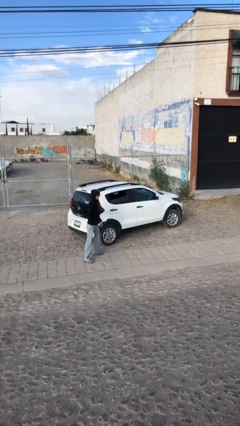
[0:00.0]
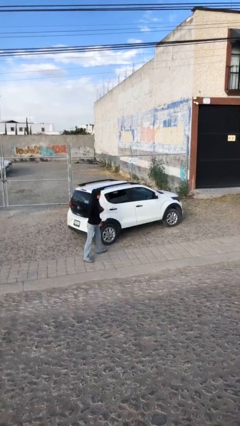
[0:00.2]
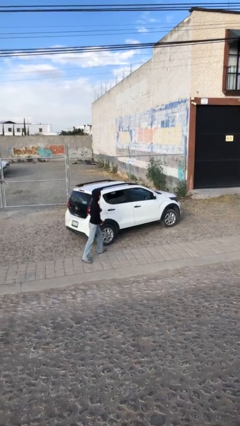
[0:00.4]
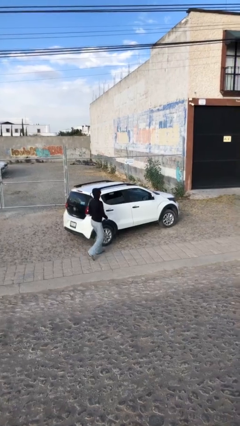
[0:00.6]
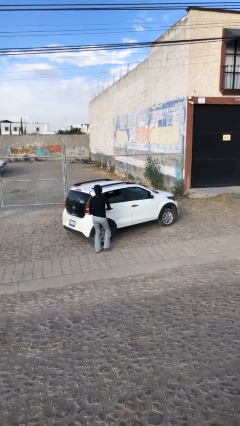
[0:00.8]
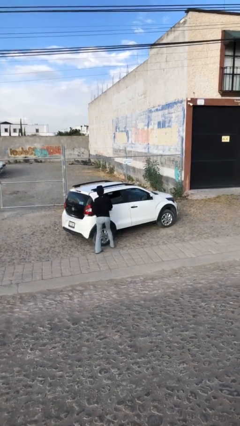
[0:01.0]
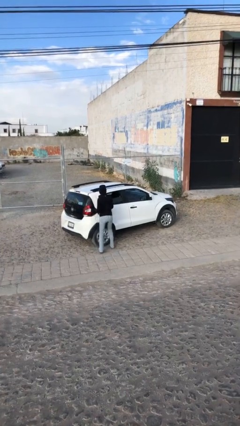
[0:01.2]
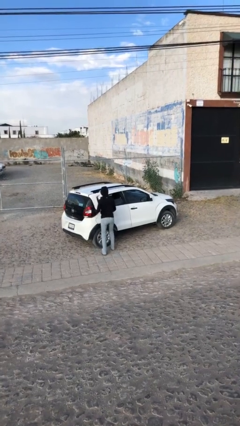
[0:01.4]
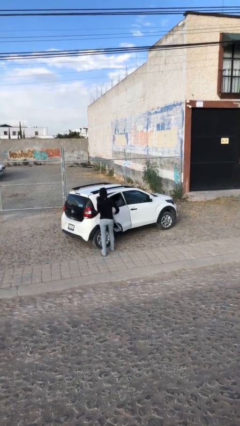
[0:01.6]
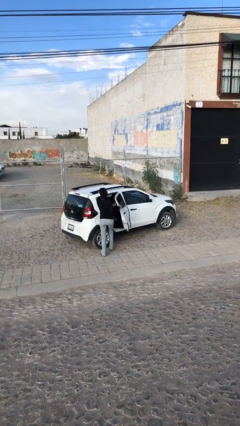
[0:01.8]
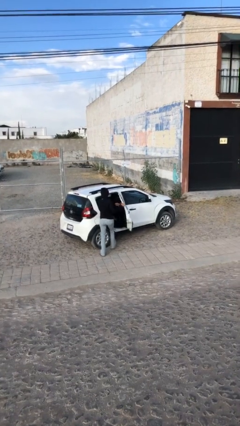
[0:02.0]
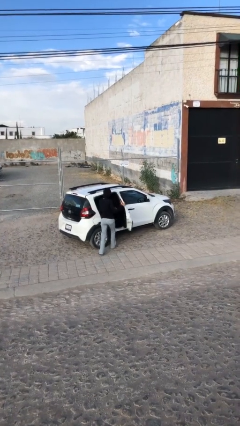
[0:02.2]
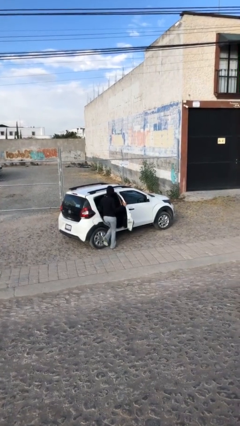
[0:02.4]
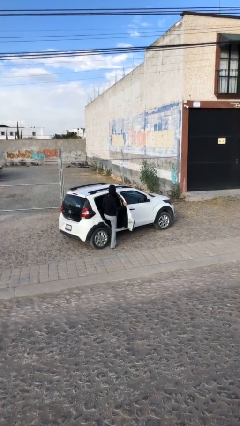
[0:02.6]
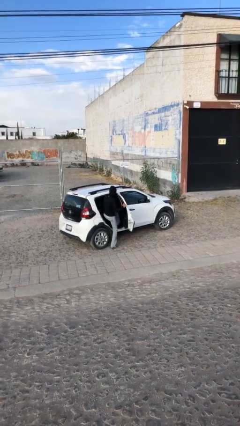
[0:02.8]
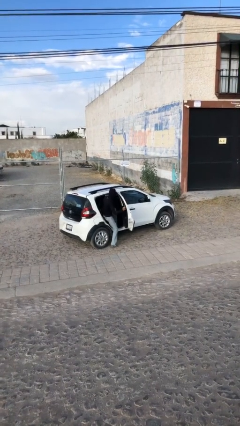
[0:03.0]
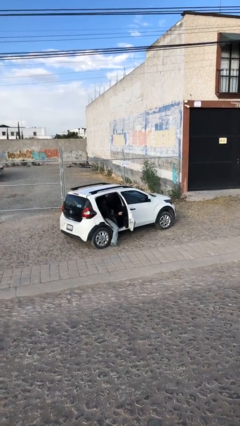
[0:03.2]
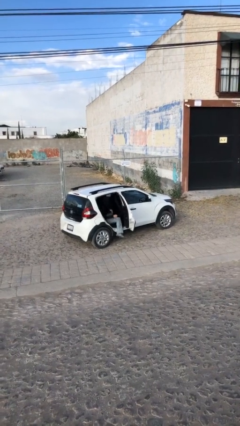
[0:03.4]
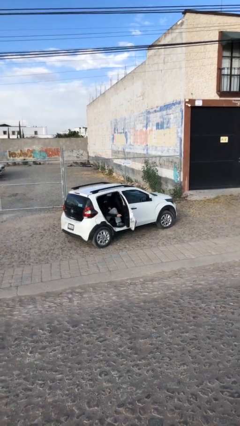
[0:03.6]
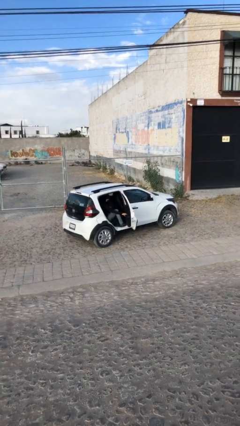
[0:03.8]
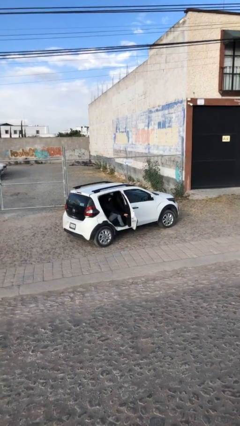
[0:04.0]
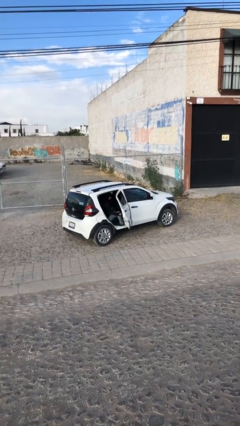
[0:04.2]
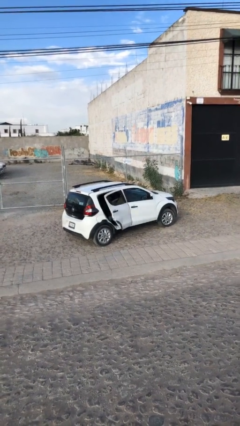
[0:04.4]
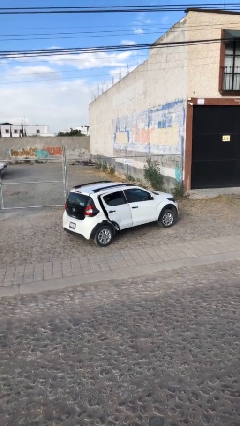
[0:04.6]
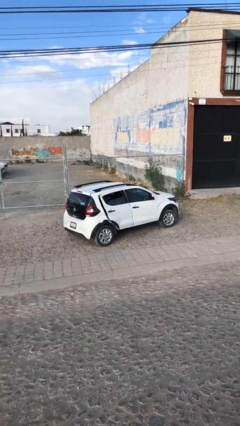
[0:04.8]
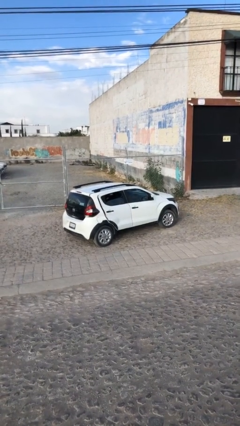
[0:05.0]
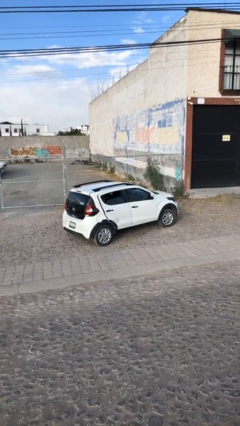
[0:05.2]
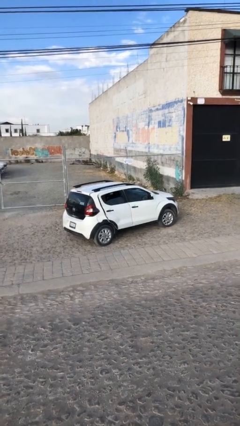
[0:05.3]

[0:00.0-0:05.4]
car picks up person

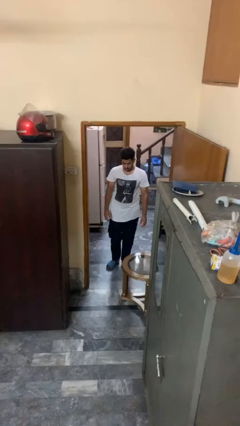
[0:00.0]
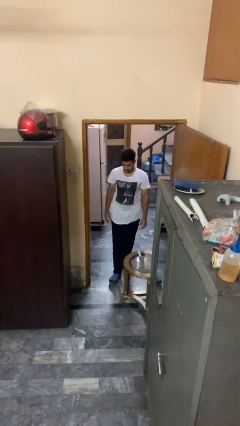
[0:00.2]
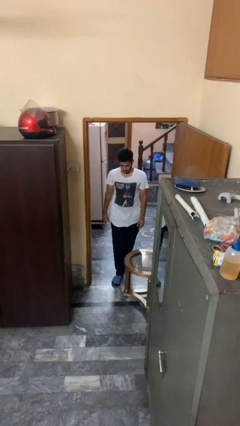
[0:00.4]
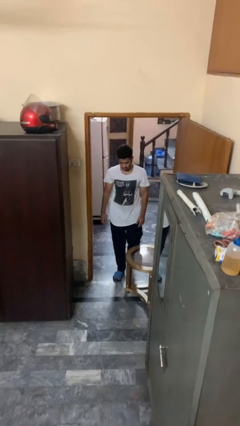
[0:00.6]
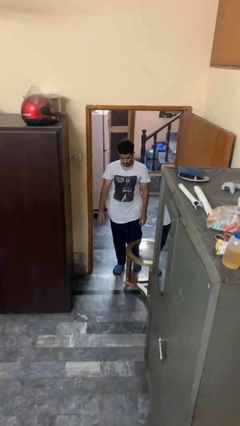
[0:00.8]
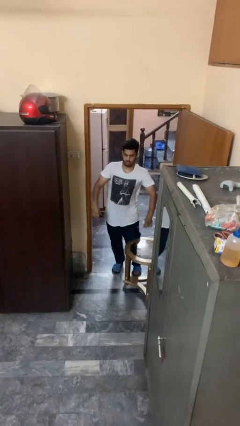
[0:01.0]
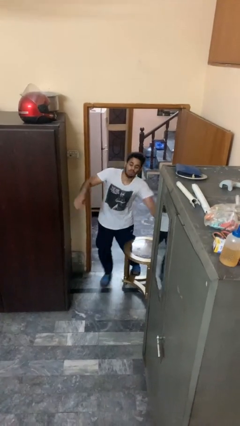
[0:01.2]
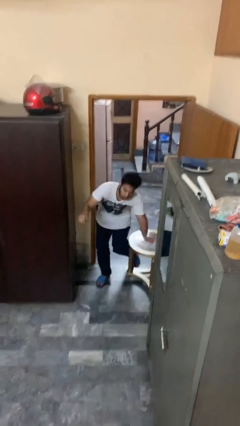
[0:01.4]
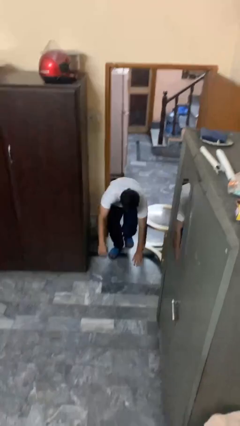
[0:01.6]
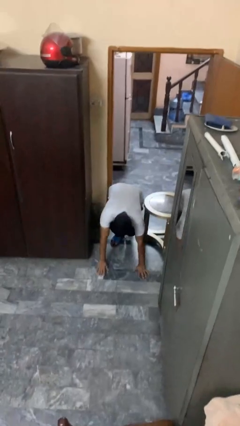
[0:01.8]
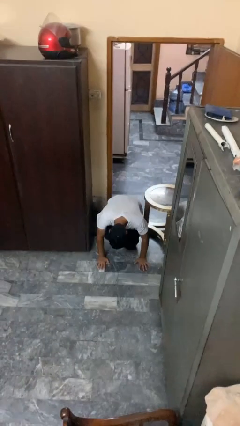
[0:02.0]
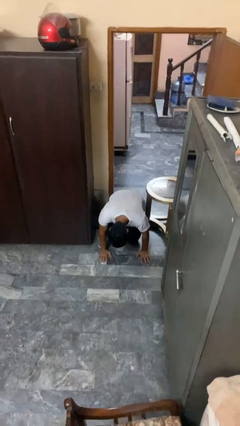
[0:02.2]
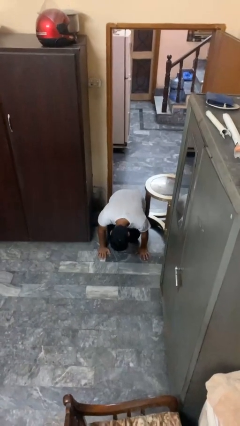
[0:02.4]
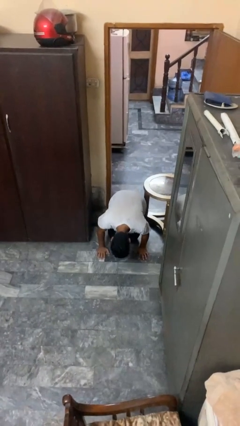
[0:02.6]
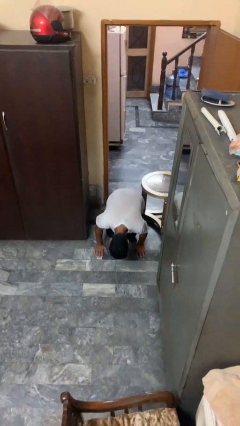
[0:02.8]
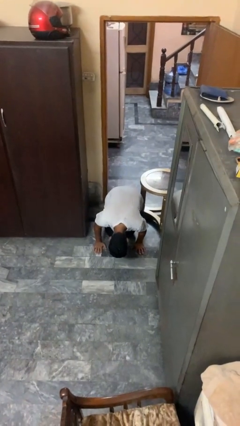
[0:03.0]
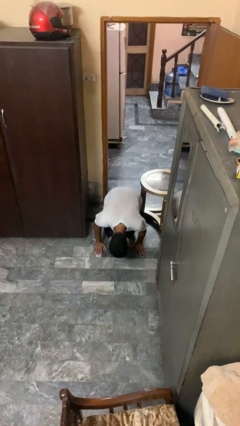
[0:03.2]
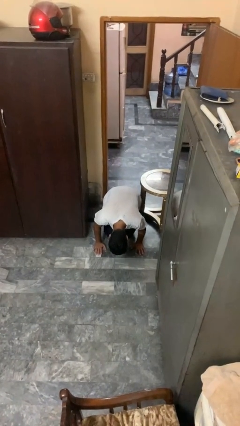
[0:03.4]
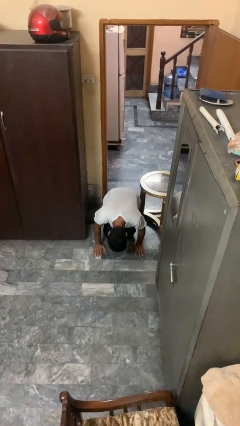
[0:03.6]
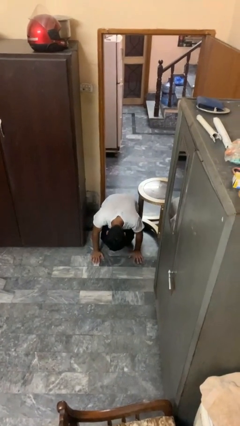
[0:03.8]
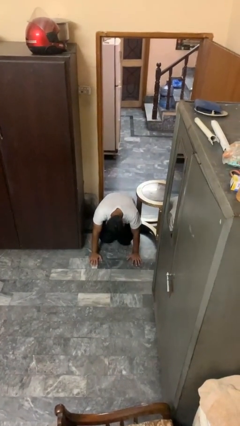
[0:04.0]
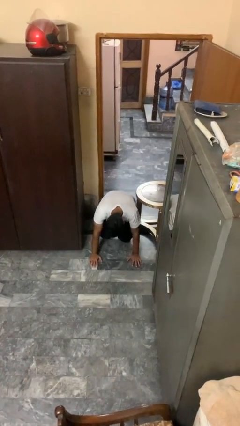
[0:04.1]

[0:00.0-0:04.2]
person trips on object on floor

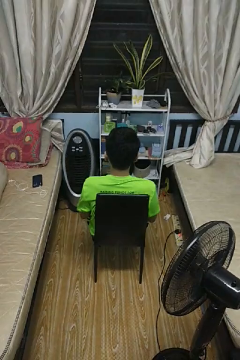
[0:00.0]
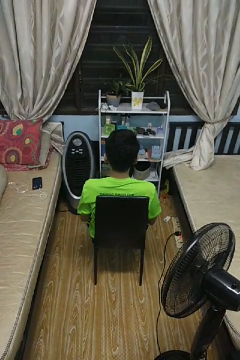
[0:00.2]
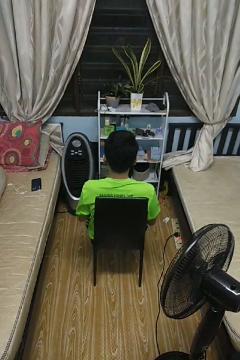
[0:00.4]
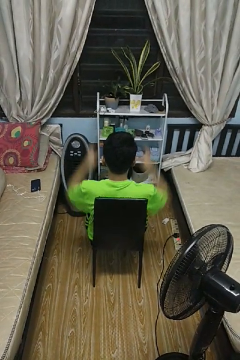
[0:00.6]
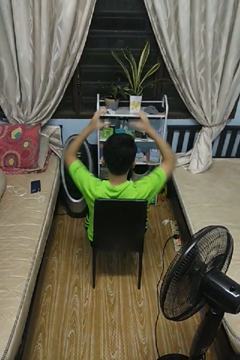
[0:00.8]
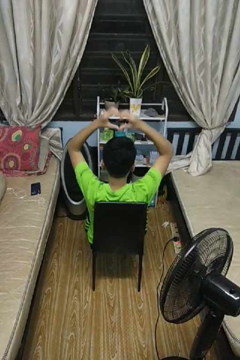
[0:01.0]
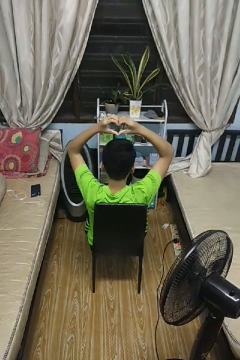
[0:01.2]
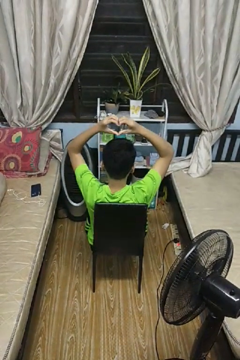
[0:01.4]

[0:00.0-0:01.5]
person gestures heart

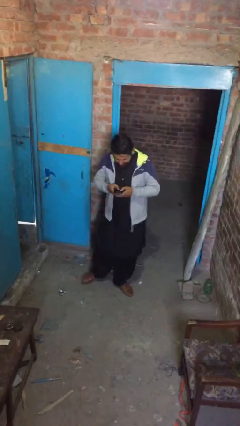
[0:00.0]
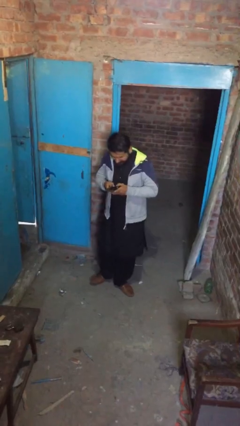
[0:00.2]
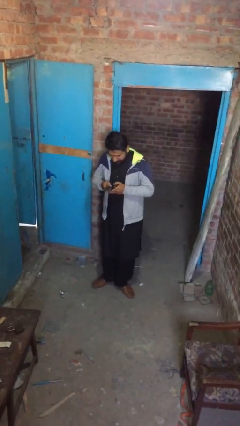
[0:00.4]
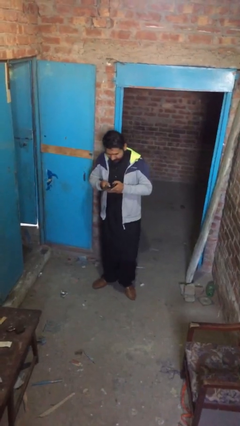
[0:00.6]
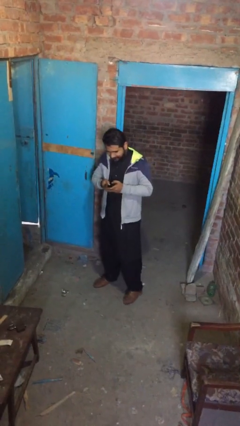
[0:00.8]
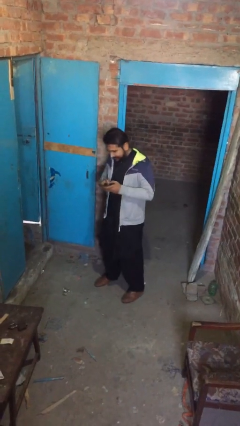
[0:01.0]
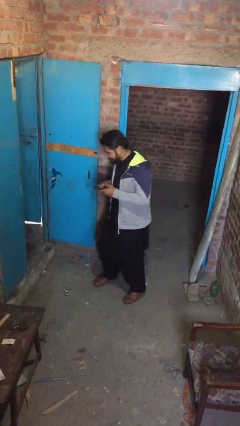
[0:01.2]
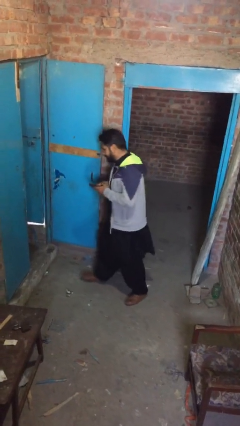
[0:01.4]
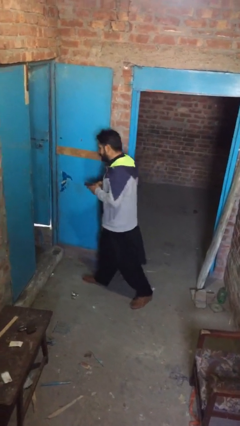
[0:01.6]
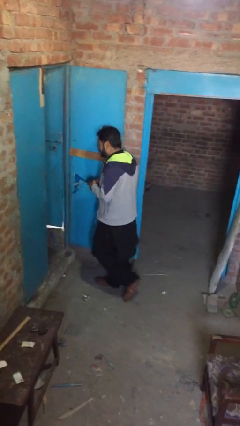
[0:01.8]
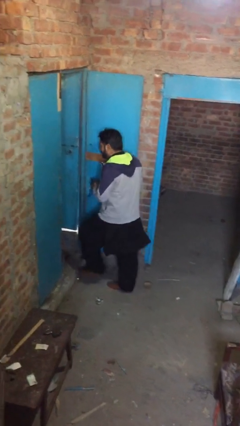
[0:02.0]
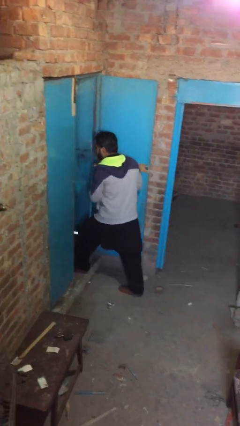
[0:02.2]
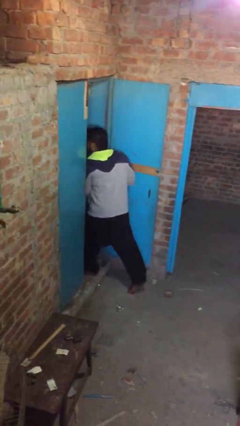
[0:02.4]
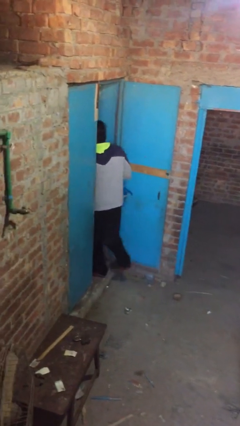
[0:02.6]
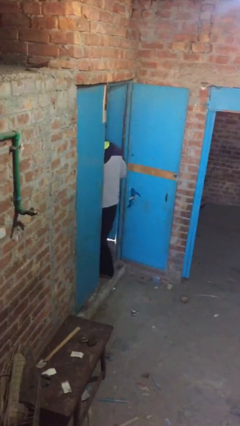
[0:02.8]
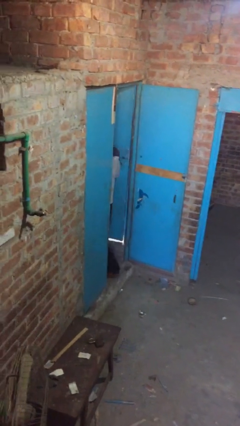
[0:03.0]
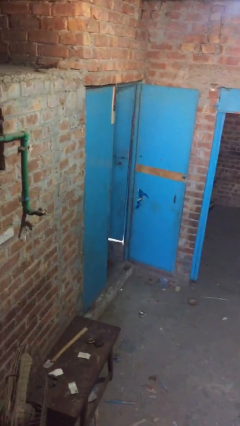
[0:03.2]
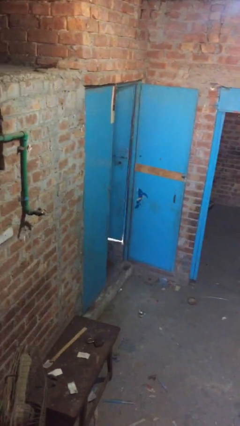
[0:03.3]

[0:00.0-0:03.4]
person exits scene through structure

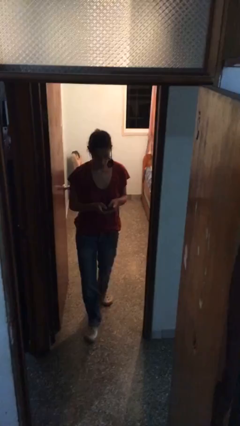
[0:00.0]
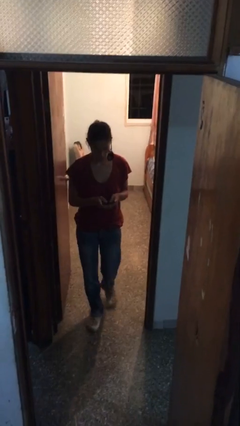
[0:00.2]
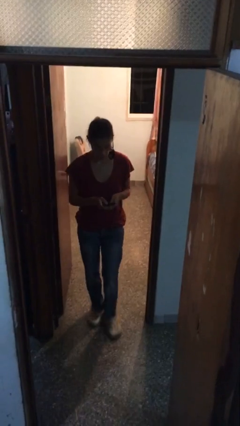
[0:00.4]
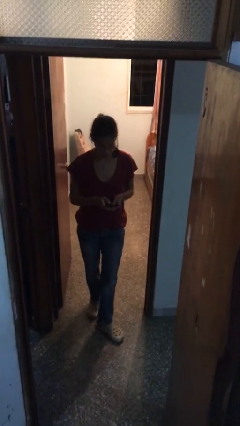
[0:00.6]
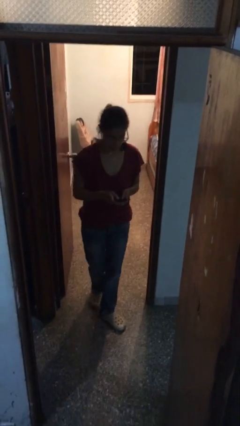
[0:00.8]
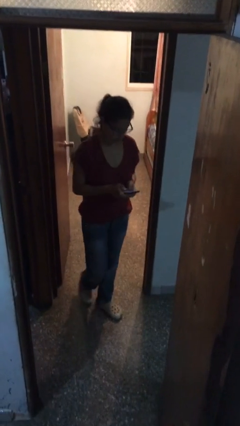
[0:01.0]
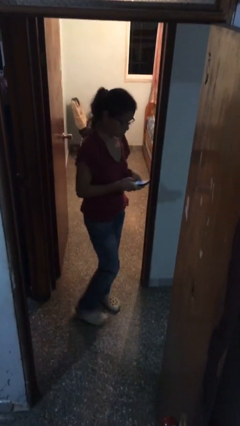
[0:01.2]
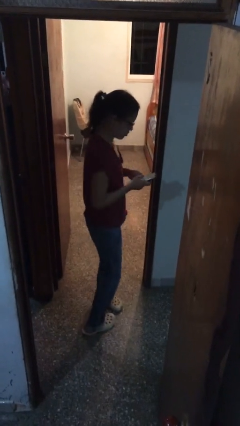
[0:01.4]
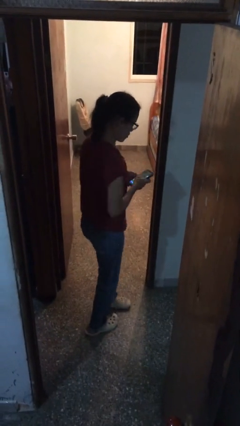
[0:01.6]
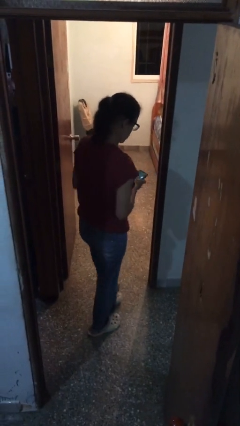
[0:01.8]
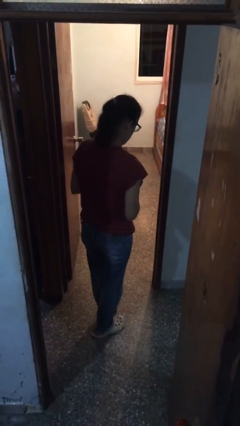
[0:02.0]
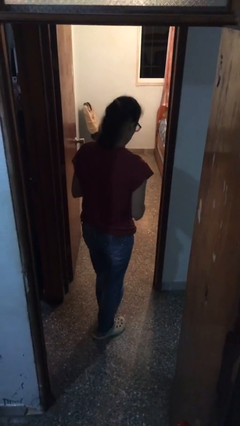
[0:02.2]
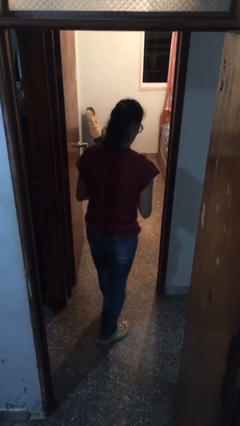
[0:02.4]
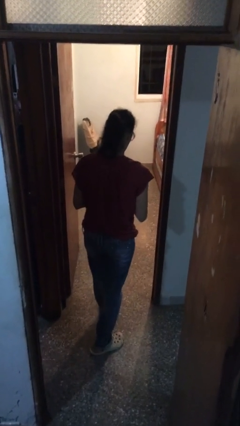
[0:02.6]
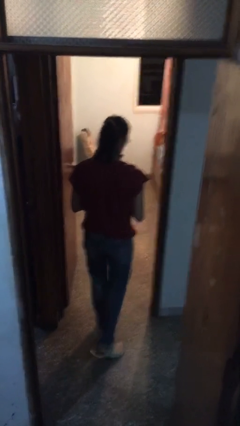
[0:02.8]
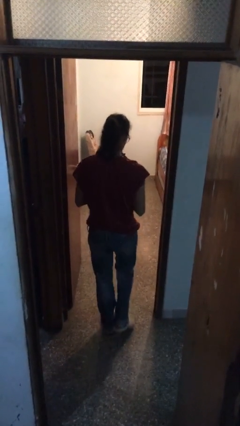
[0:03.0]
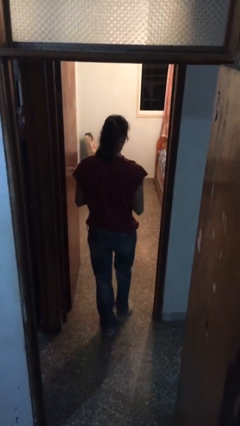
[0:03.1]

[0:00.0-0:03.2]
person enters scene through structure
